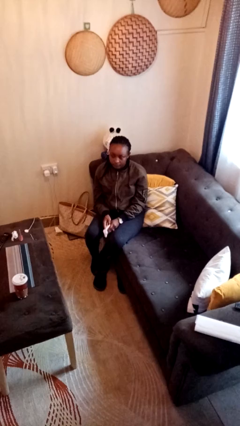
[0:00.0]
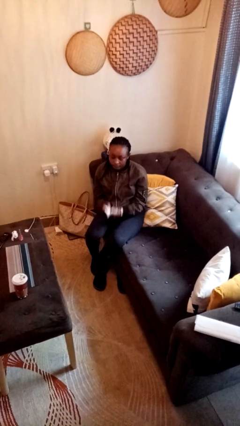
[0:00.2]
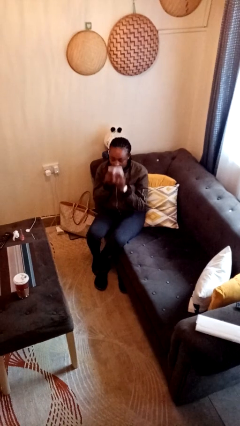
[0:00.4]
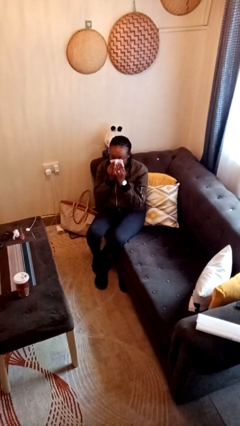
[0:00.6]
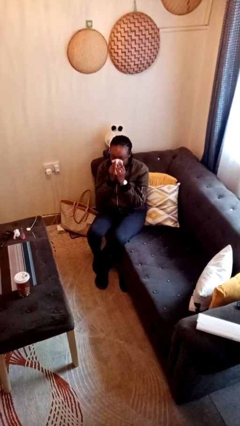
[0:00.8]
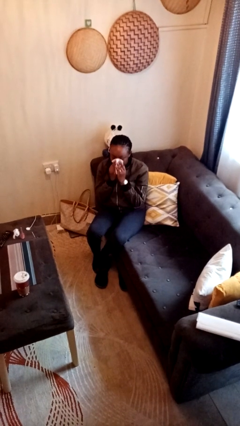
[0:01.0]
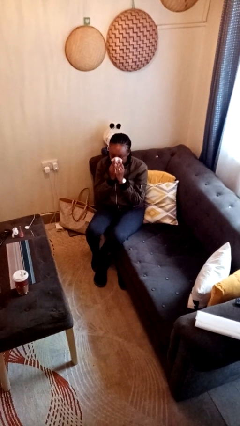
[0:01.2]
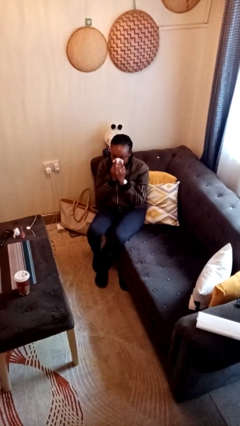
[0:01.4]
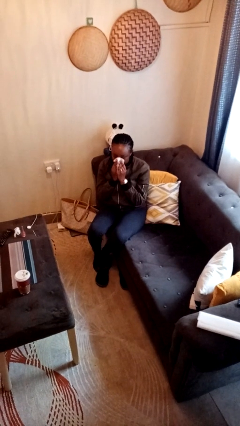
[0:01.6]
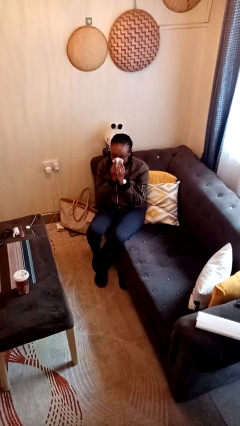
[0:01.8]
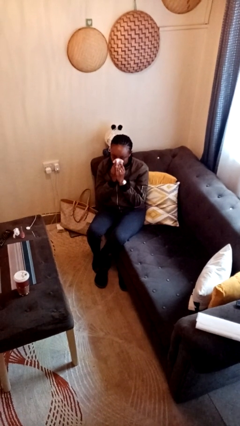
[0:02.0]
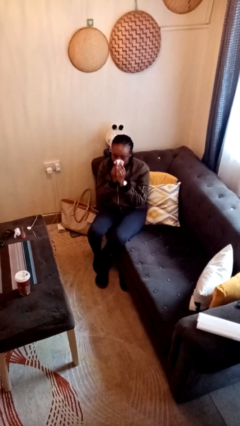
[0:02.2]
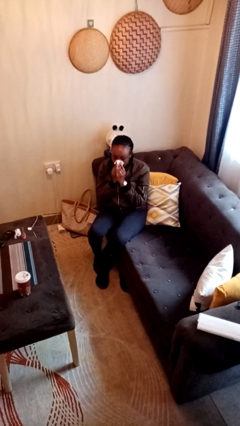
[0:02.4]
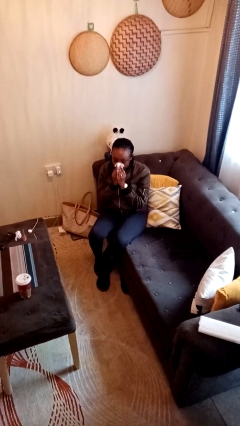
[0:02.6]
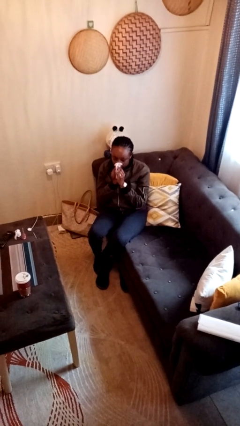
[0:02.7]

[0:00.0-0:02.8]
person blows nose

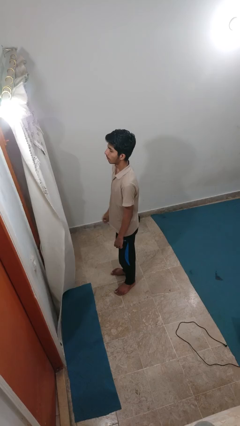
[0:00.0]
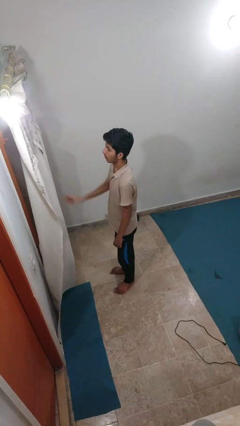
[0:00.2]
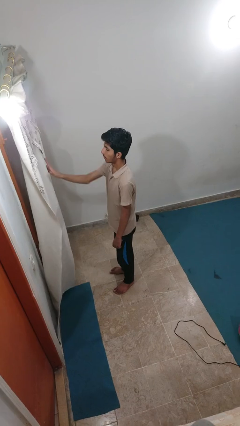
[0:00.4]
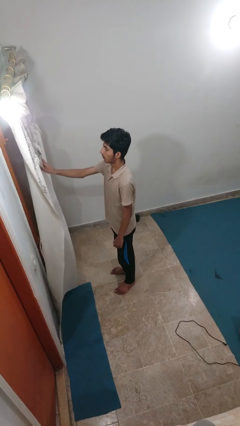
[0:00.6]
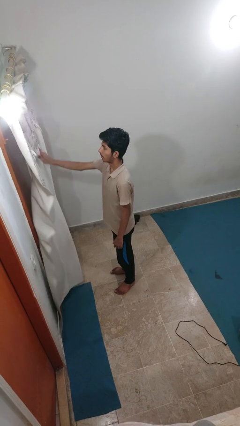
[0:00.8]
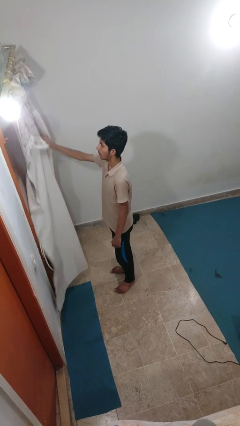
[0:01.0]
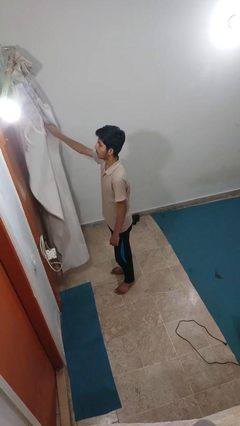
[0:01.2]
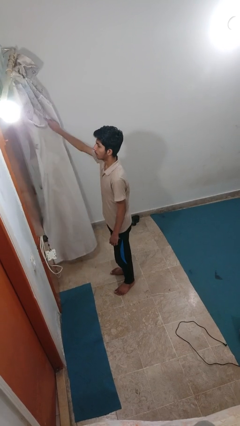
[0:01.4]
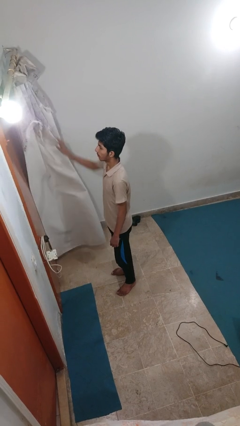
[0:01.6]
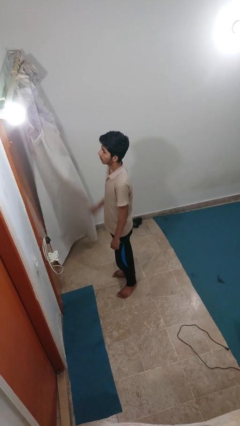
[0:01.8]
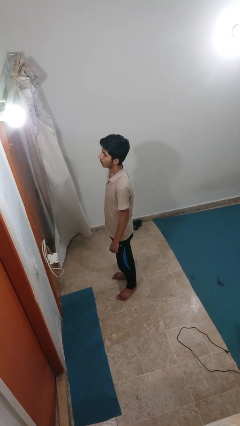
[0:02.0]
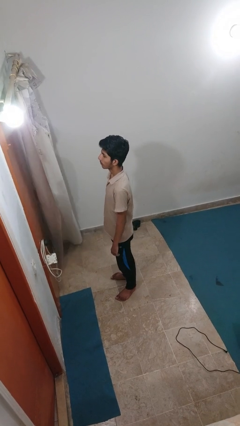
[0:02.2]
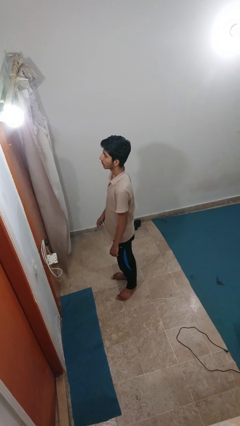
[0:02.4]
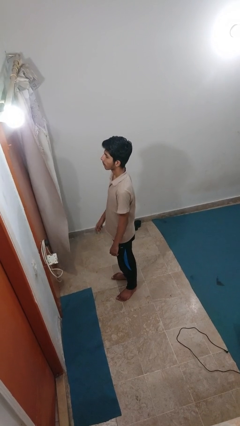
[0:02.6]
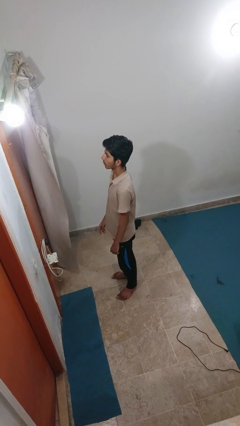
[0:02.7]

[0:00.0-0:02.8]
person opens curtains

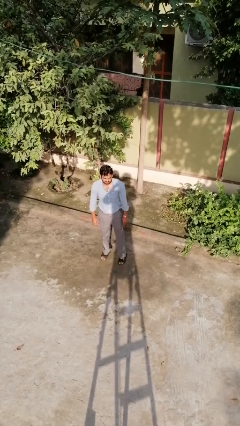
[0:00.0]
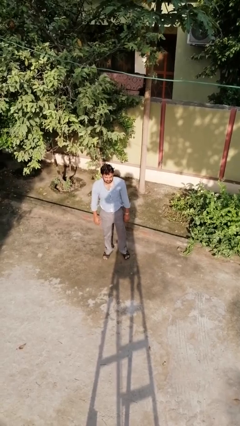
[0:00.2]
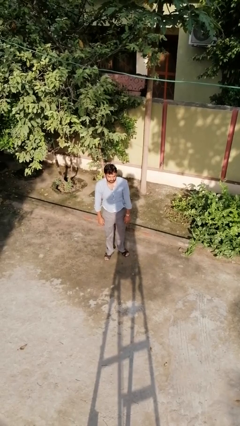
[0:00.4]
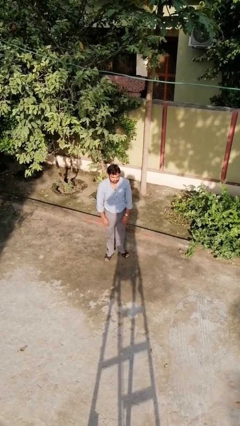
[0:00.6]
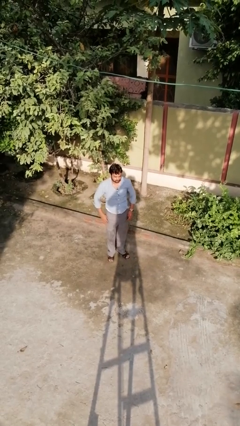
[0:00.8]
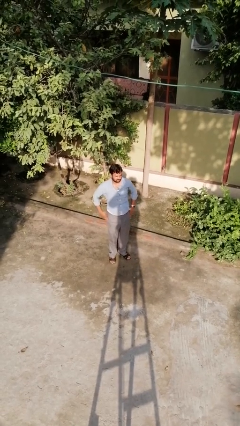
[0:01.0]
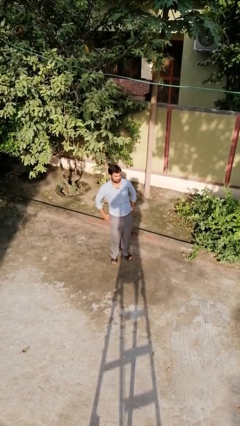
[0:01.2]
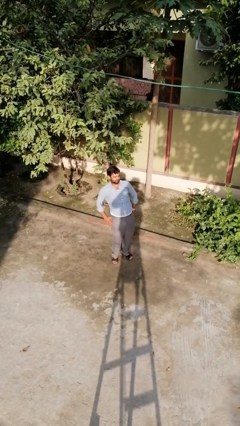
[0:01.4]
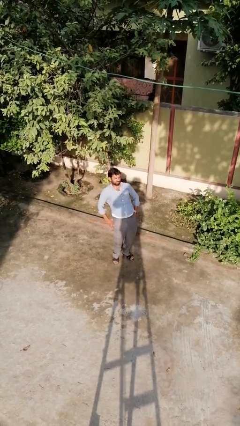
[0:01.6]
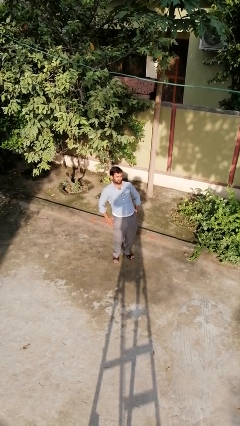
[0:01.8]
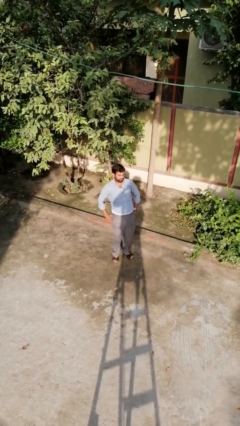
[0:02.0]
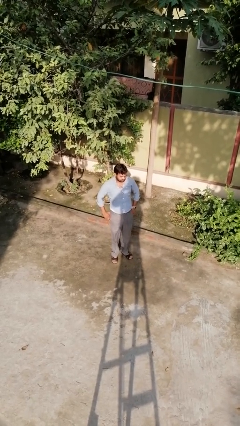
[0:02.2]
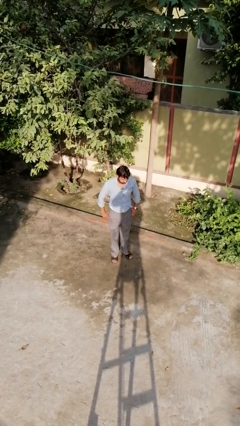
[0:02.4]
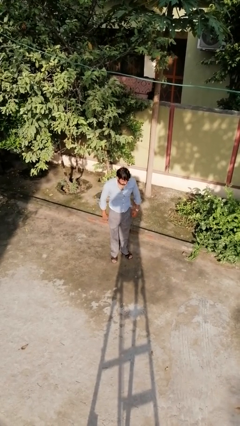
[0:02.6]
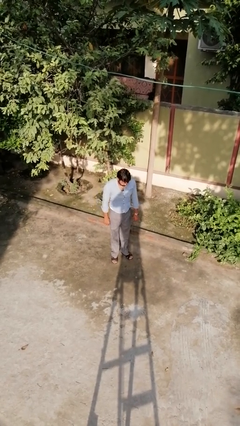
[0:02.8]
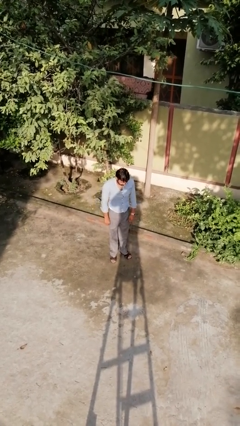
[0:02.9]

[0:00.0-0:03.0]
person stretches back

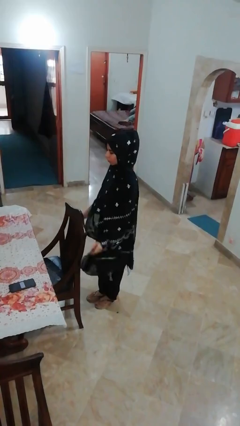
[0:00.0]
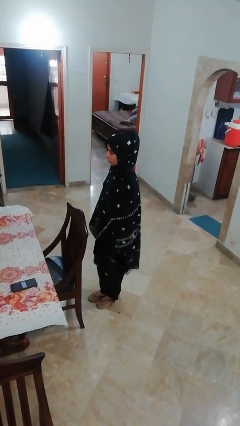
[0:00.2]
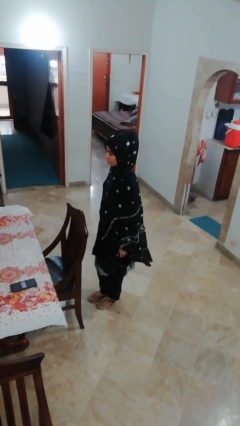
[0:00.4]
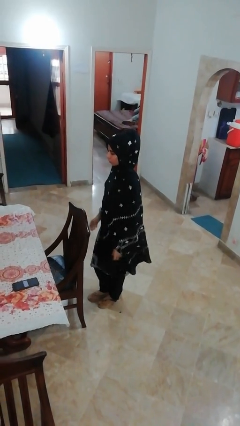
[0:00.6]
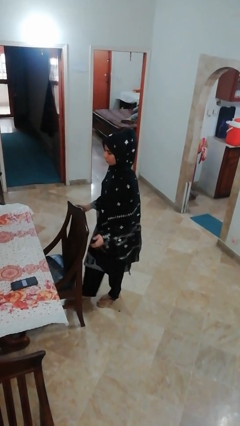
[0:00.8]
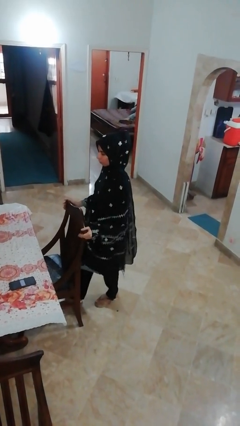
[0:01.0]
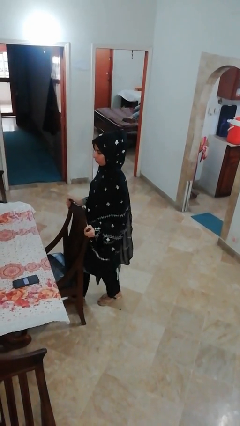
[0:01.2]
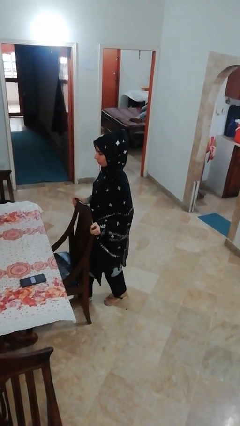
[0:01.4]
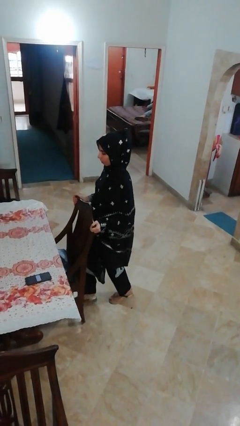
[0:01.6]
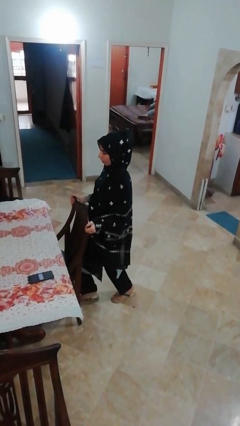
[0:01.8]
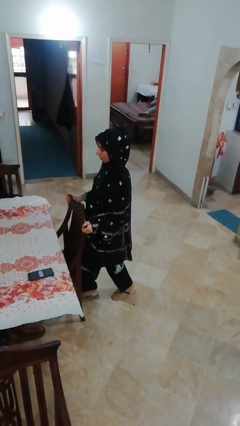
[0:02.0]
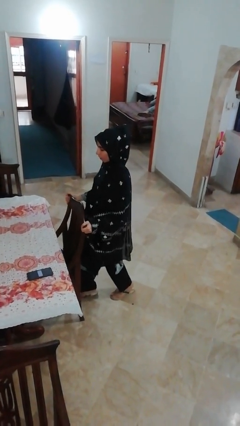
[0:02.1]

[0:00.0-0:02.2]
person pushes in chair

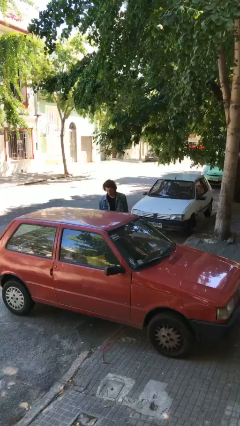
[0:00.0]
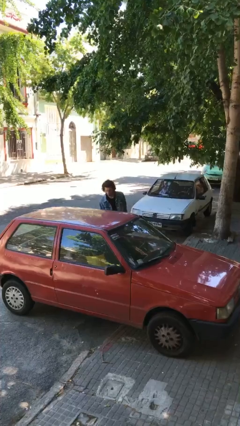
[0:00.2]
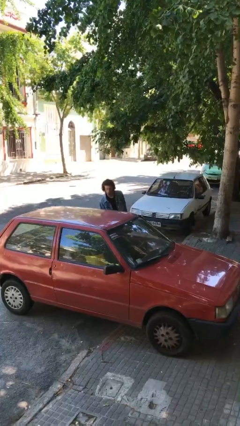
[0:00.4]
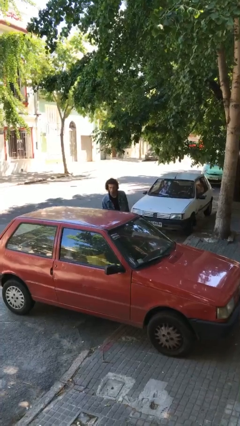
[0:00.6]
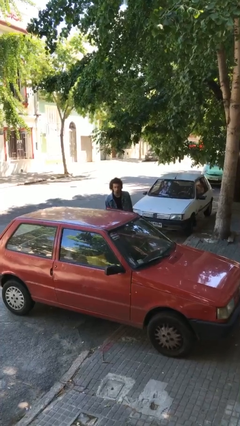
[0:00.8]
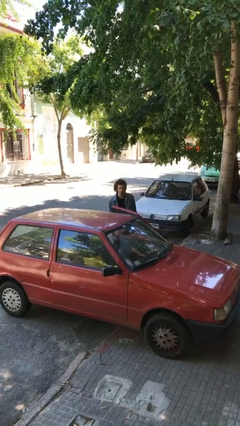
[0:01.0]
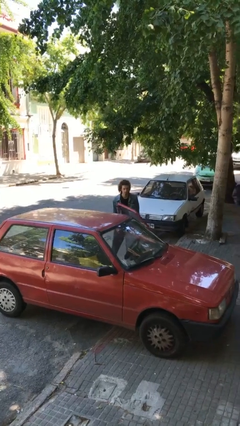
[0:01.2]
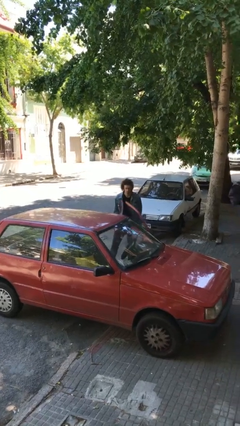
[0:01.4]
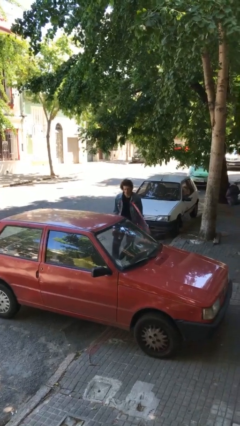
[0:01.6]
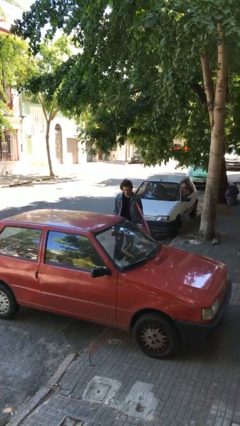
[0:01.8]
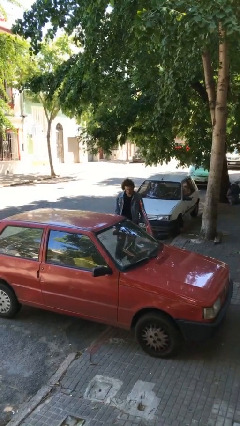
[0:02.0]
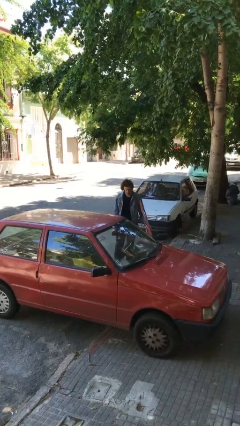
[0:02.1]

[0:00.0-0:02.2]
person opens car door

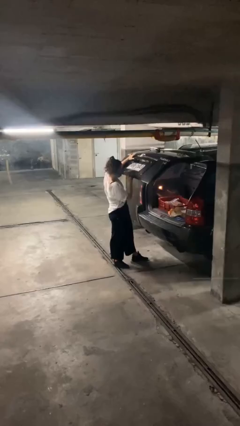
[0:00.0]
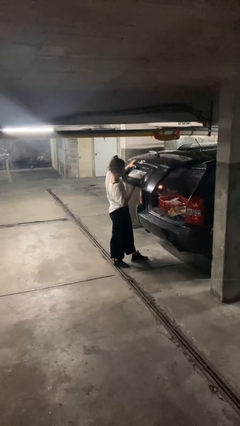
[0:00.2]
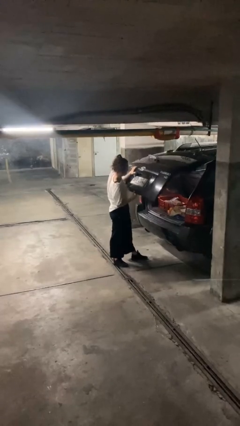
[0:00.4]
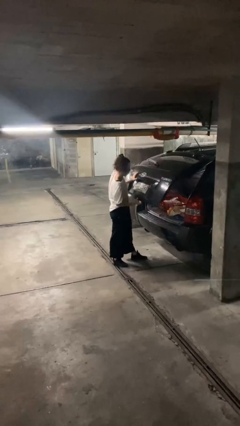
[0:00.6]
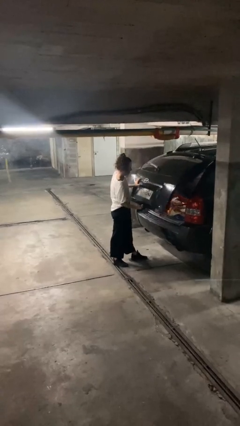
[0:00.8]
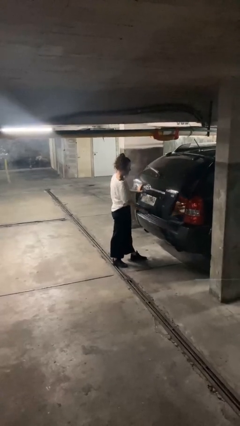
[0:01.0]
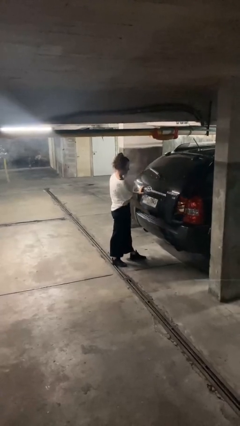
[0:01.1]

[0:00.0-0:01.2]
person closes car trunk

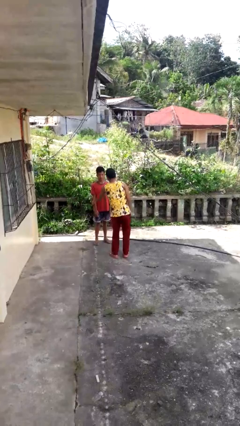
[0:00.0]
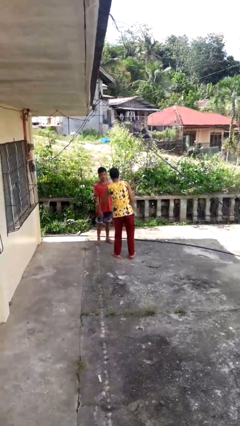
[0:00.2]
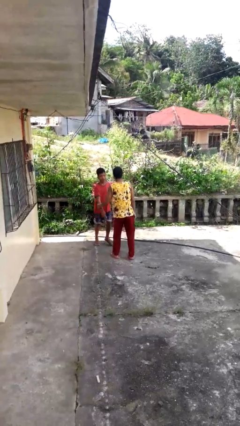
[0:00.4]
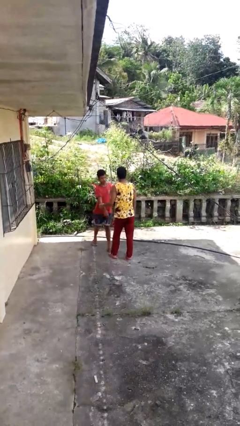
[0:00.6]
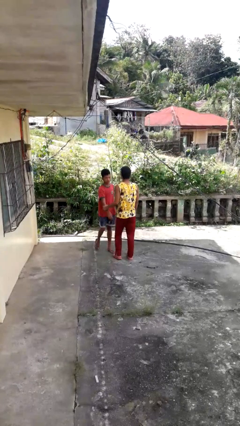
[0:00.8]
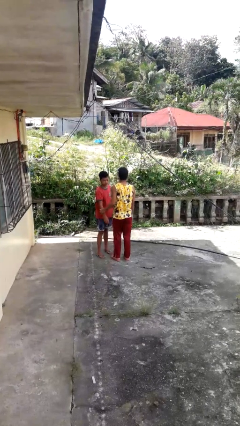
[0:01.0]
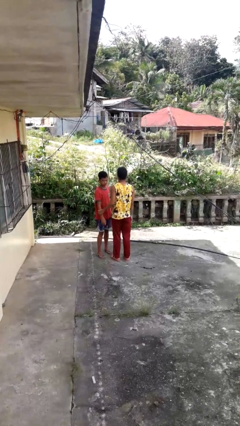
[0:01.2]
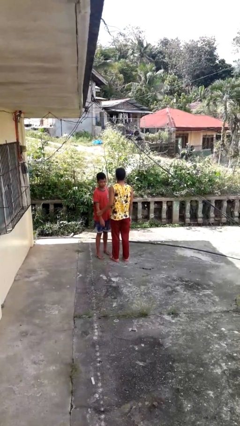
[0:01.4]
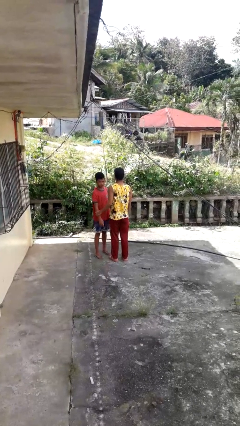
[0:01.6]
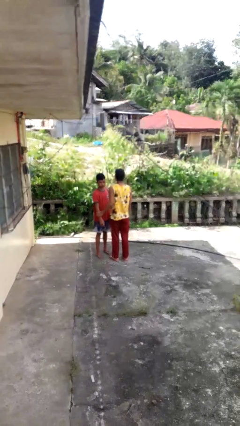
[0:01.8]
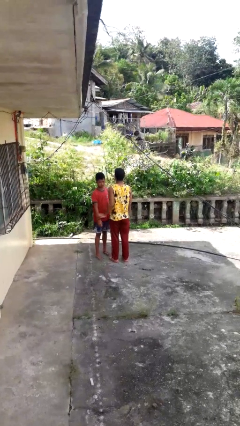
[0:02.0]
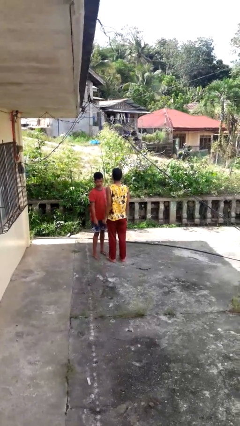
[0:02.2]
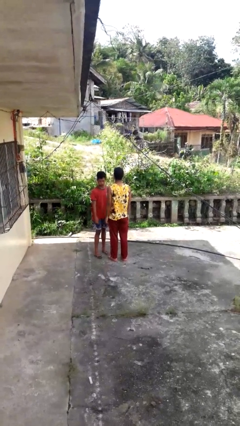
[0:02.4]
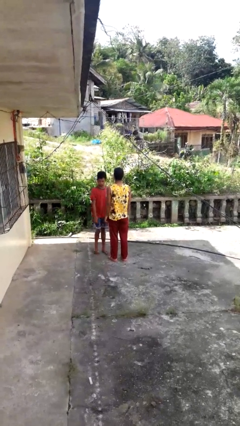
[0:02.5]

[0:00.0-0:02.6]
person grabs person by forearm
